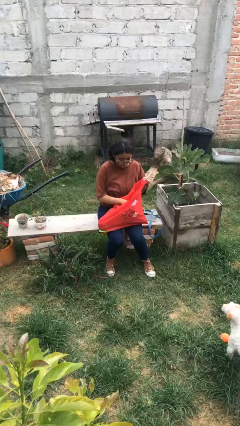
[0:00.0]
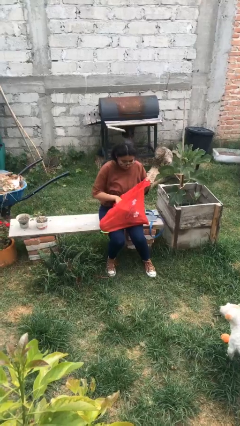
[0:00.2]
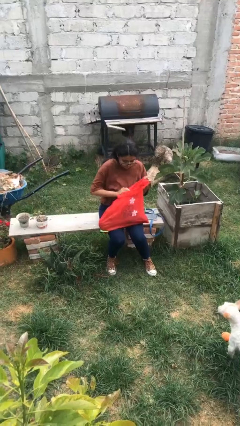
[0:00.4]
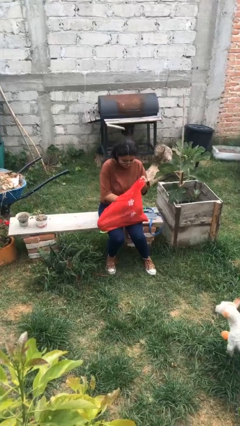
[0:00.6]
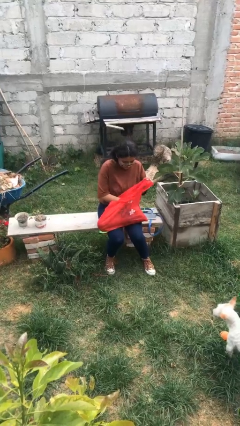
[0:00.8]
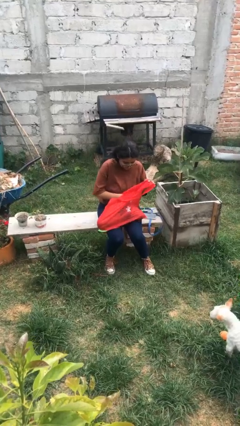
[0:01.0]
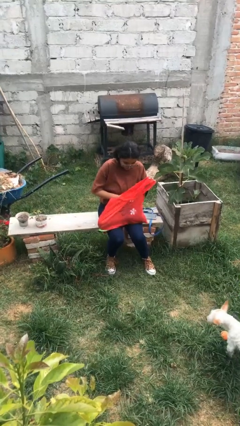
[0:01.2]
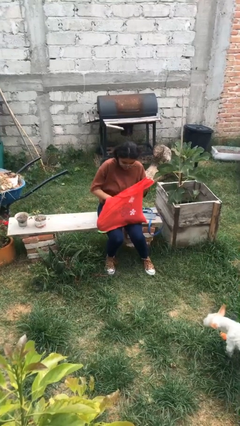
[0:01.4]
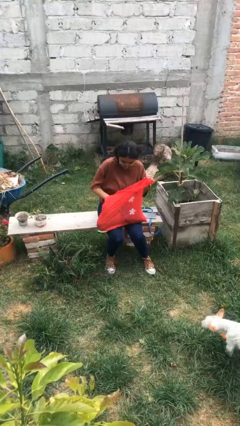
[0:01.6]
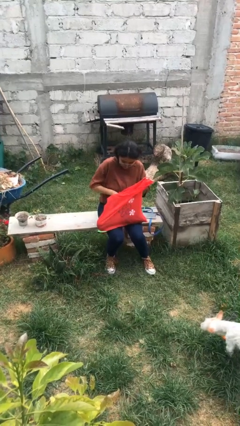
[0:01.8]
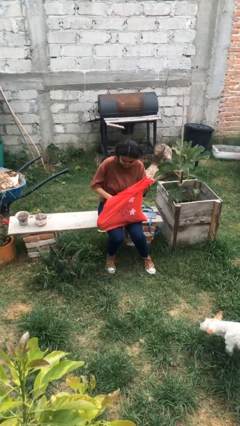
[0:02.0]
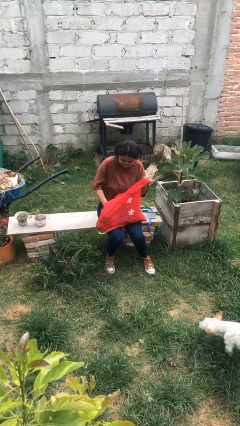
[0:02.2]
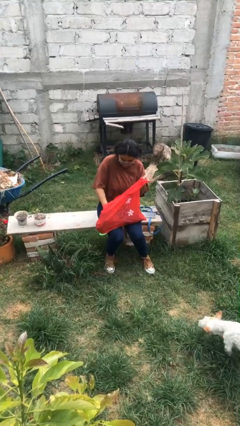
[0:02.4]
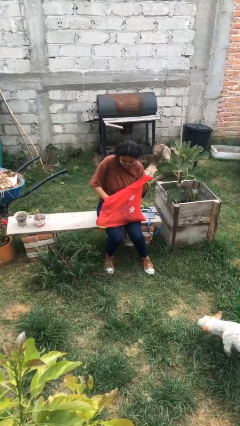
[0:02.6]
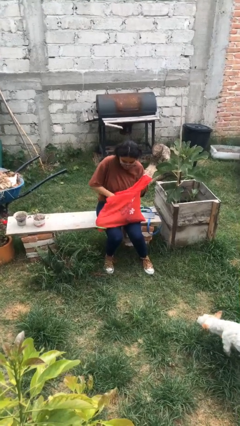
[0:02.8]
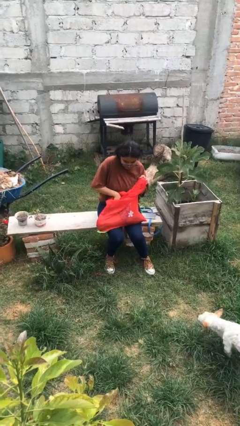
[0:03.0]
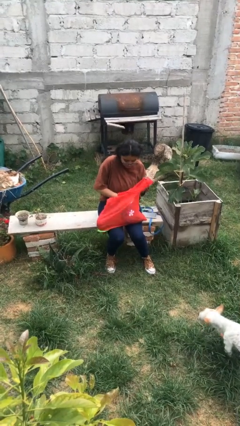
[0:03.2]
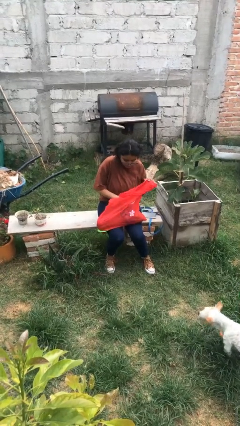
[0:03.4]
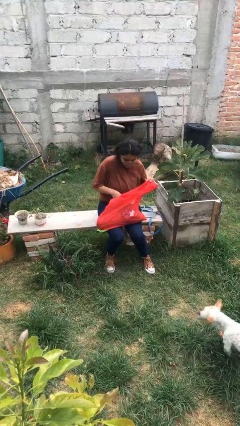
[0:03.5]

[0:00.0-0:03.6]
person searches in bag

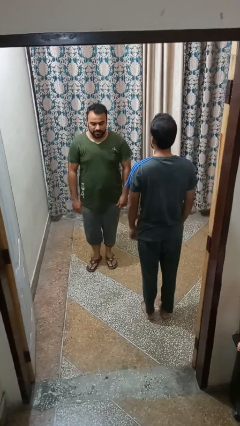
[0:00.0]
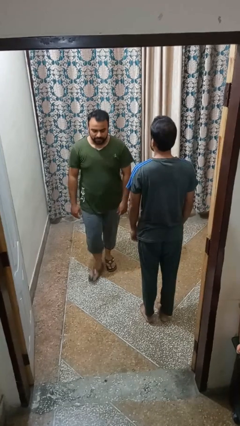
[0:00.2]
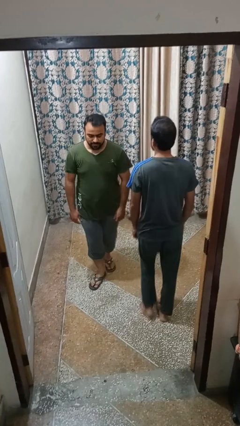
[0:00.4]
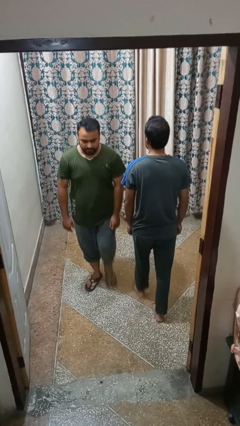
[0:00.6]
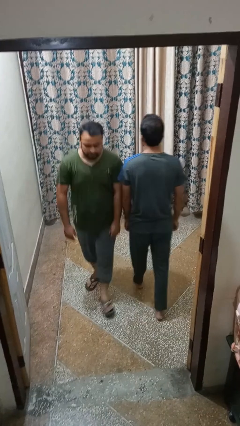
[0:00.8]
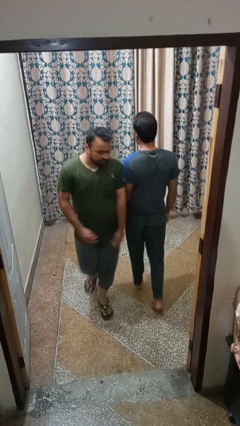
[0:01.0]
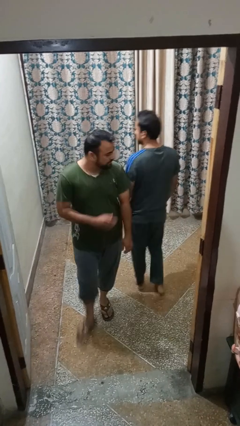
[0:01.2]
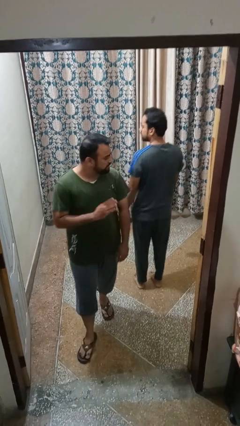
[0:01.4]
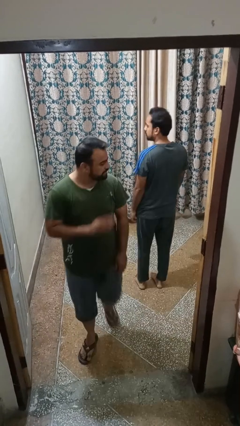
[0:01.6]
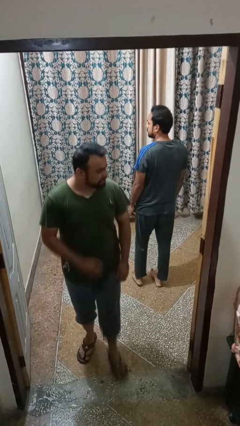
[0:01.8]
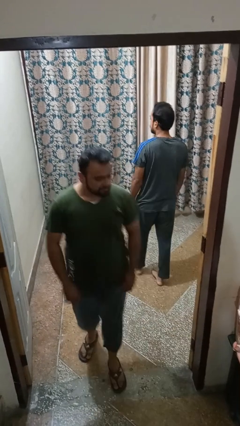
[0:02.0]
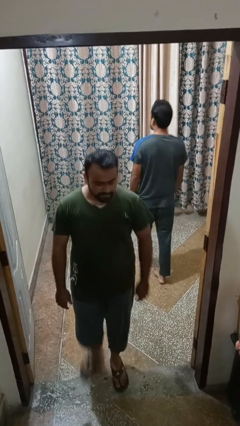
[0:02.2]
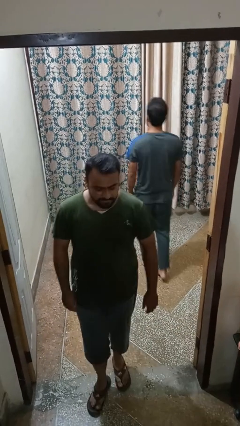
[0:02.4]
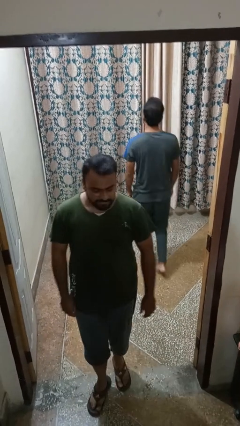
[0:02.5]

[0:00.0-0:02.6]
person bumps into person

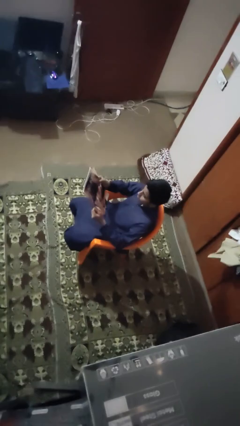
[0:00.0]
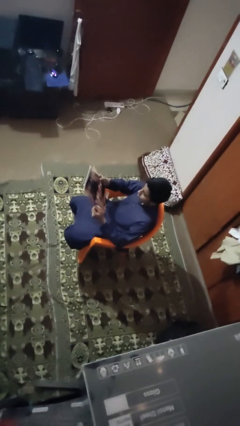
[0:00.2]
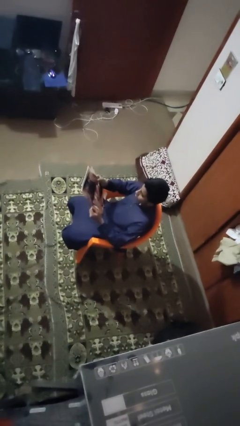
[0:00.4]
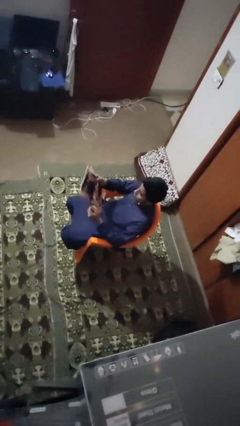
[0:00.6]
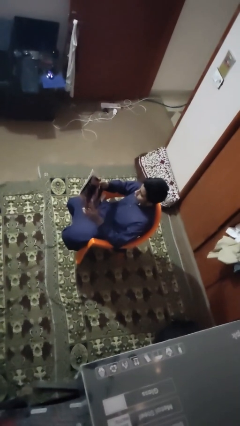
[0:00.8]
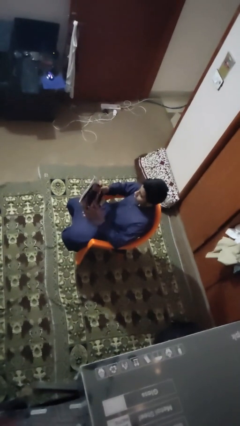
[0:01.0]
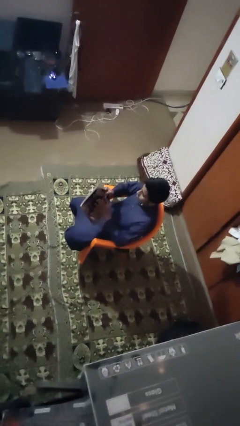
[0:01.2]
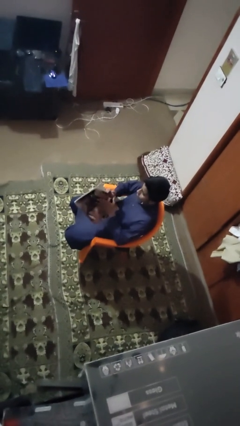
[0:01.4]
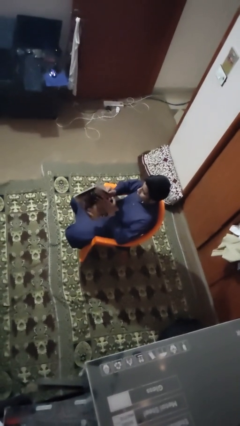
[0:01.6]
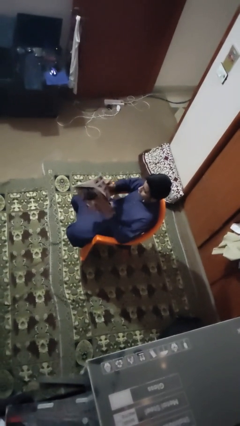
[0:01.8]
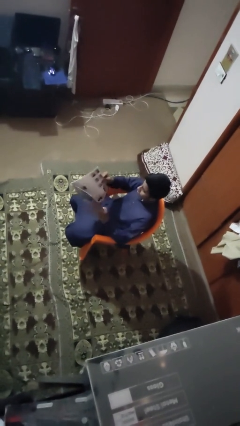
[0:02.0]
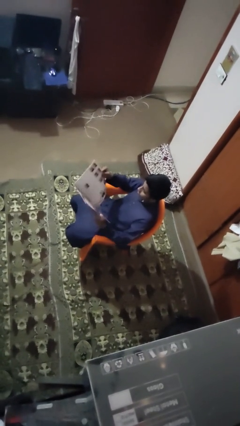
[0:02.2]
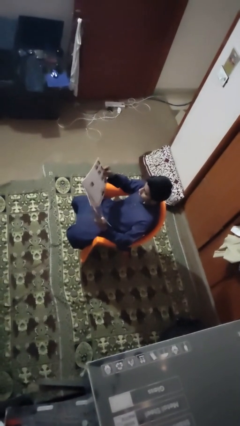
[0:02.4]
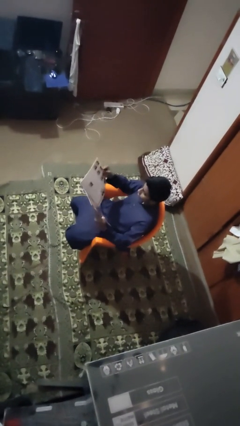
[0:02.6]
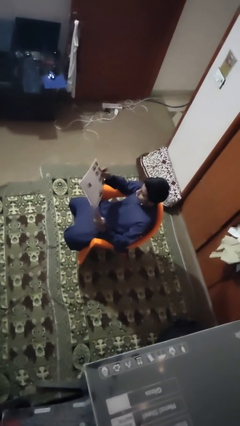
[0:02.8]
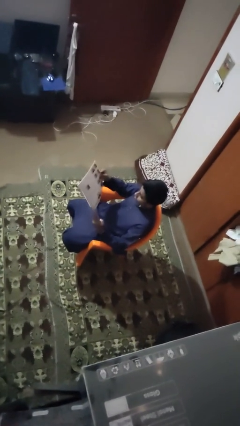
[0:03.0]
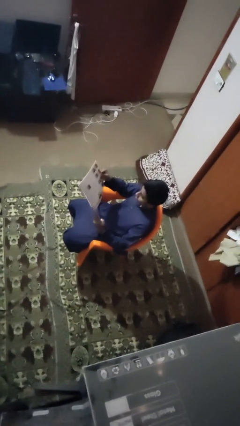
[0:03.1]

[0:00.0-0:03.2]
person reads magazine

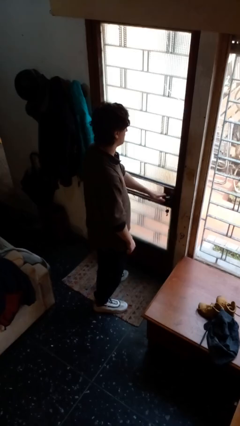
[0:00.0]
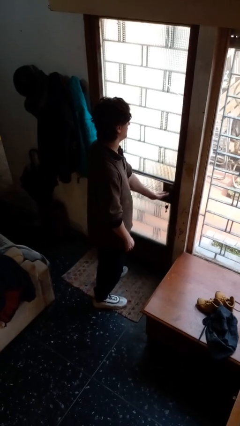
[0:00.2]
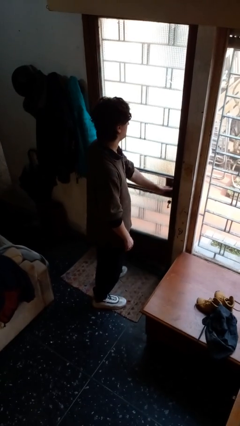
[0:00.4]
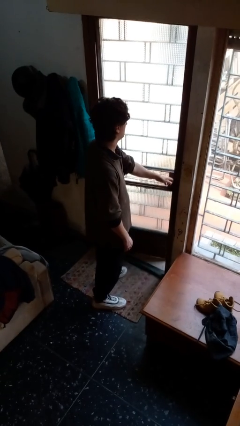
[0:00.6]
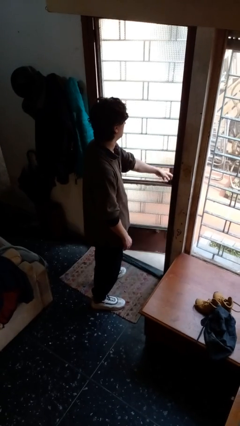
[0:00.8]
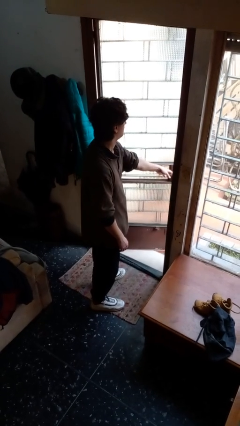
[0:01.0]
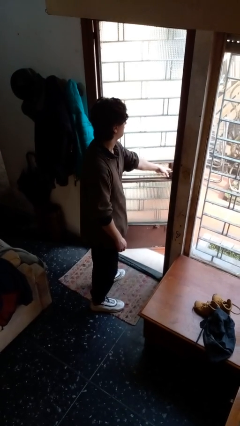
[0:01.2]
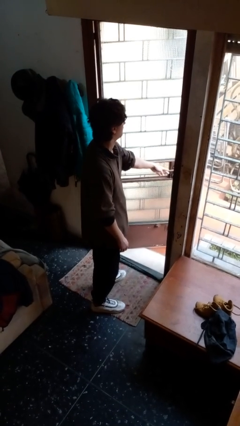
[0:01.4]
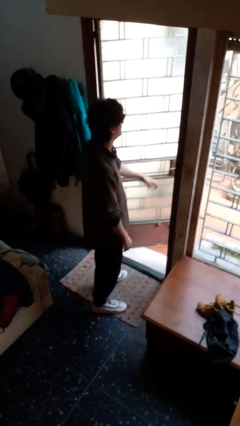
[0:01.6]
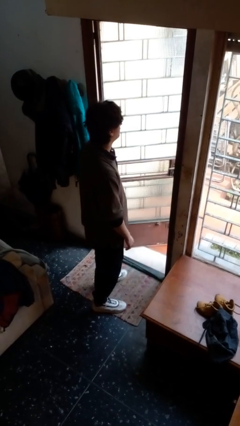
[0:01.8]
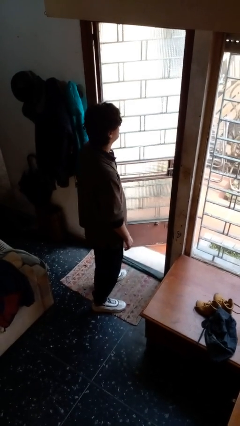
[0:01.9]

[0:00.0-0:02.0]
person opens facility door

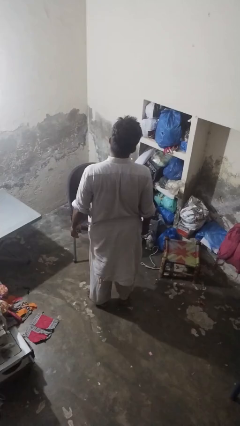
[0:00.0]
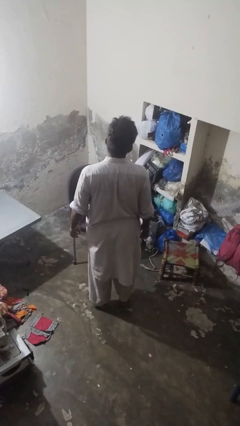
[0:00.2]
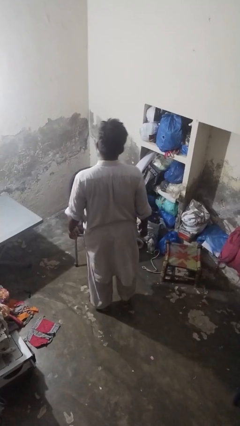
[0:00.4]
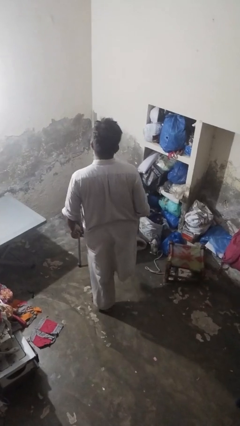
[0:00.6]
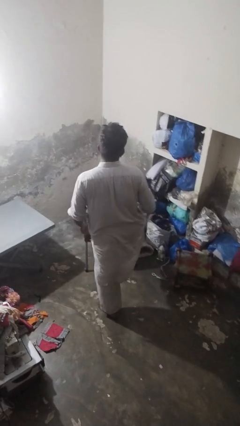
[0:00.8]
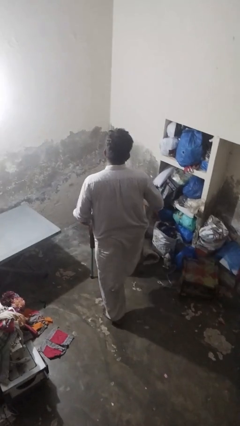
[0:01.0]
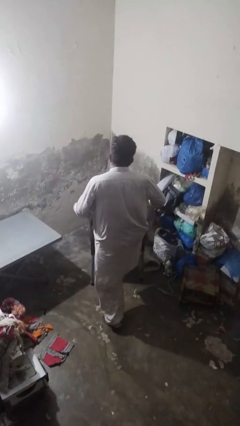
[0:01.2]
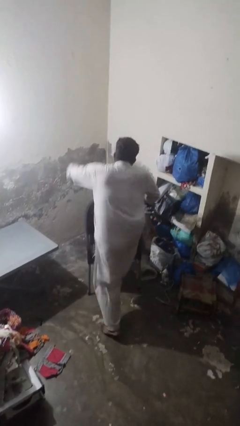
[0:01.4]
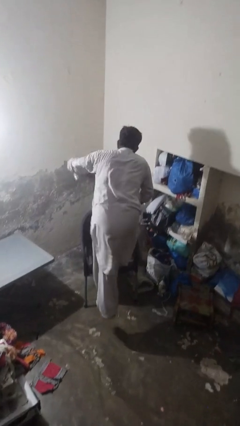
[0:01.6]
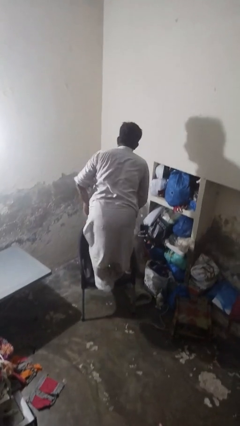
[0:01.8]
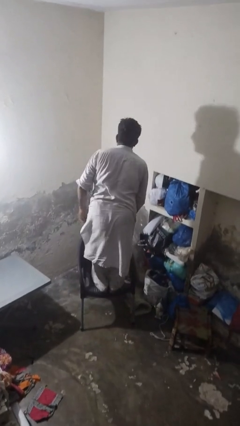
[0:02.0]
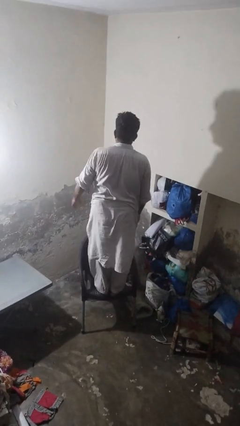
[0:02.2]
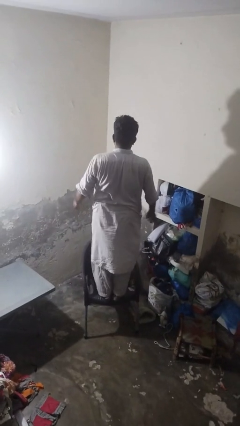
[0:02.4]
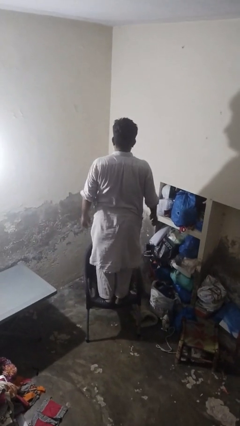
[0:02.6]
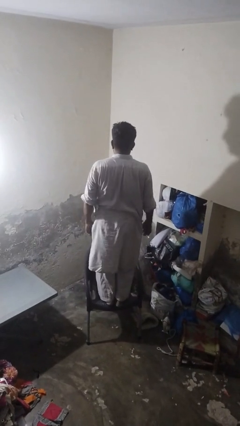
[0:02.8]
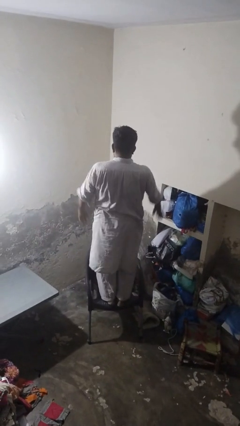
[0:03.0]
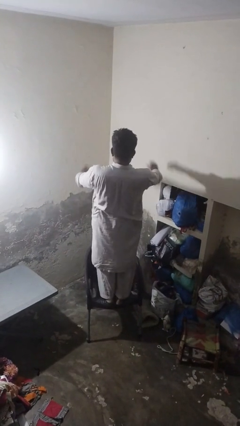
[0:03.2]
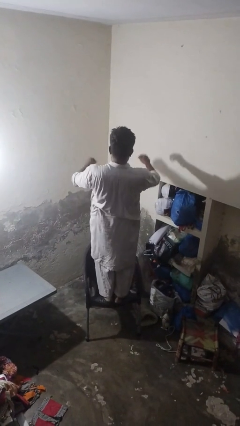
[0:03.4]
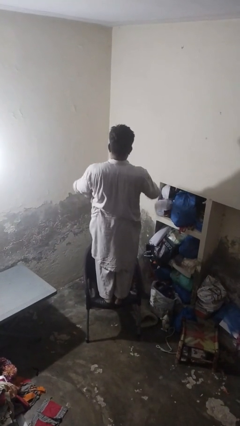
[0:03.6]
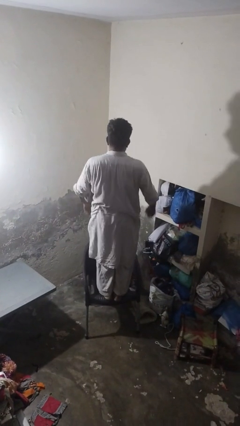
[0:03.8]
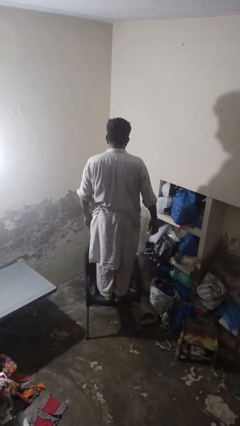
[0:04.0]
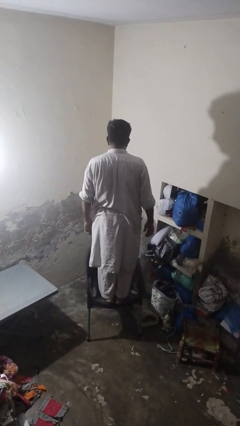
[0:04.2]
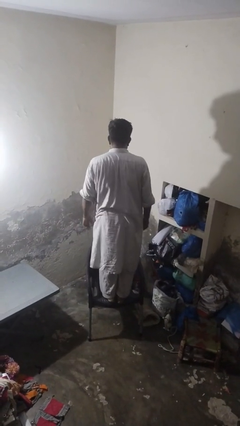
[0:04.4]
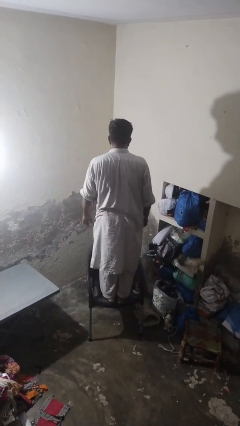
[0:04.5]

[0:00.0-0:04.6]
person climbs on chair

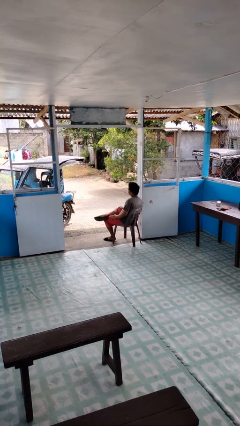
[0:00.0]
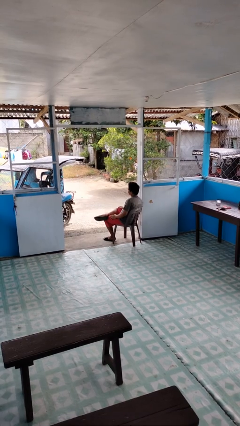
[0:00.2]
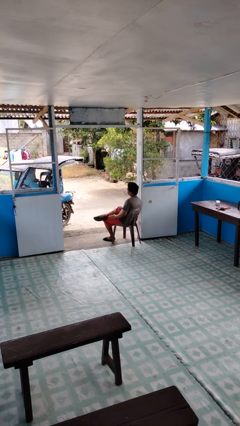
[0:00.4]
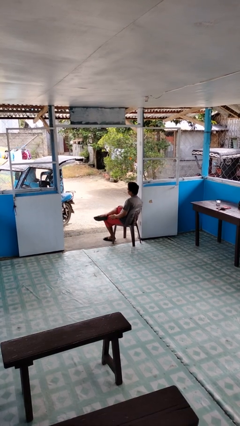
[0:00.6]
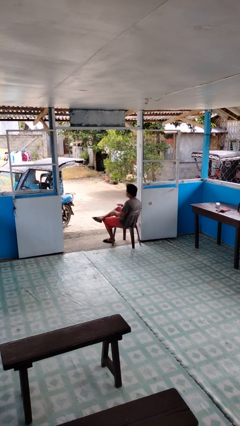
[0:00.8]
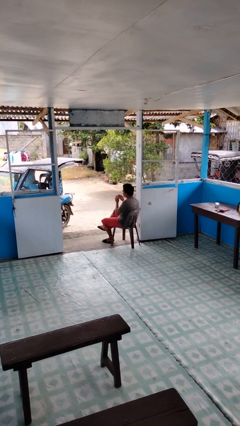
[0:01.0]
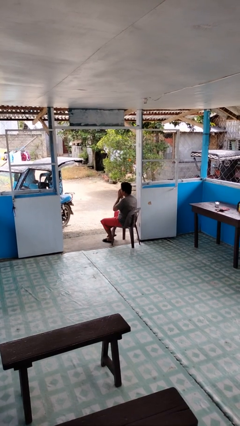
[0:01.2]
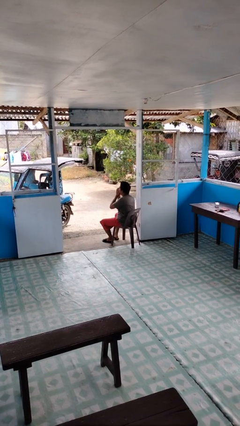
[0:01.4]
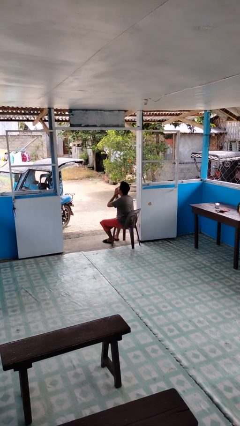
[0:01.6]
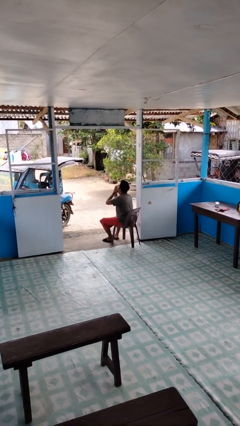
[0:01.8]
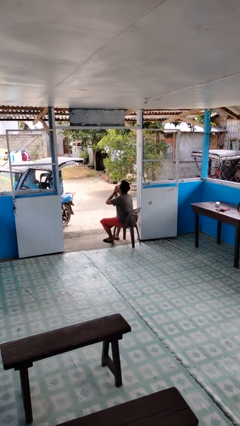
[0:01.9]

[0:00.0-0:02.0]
person yawns
